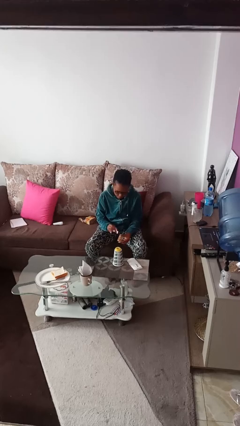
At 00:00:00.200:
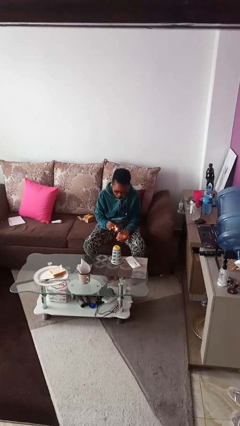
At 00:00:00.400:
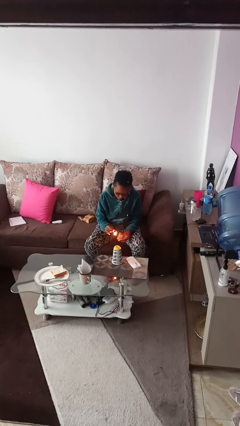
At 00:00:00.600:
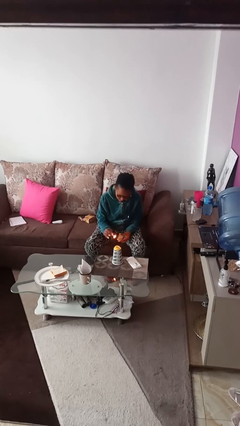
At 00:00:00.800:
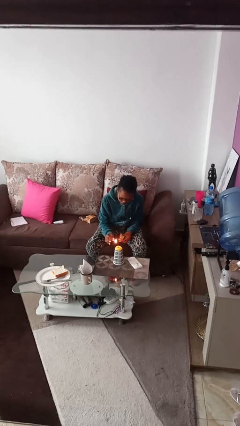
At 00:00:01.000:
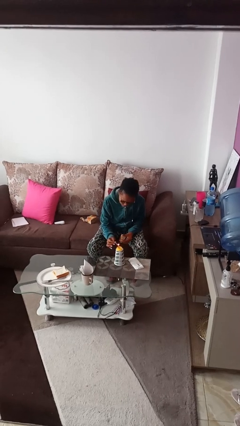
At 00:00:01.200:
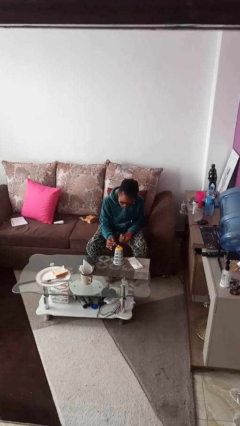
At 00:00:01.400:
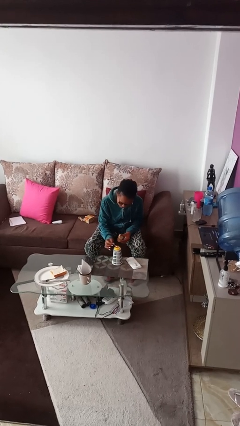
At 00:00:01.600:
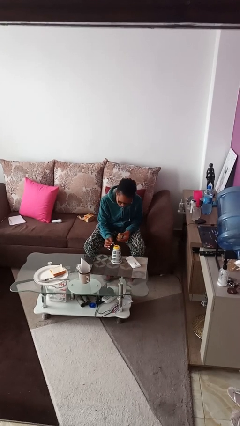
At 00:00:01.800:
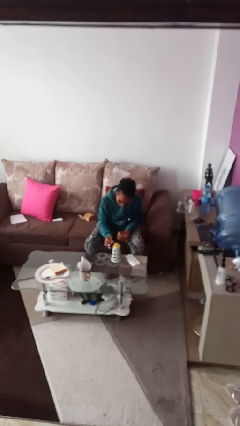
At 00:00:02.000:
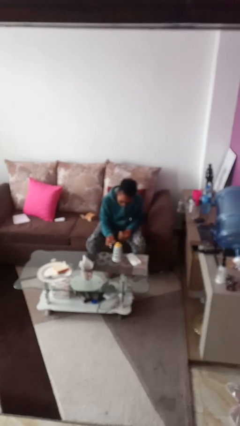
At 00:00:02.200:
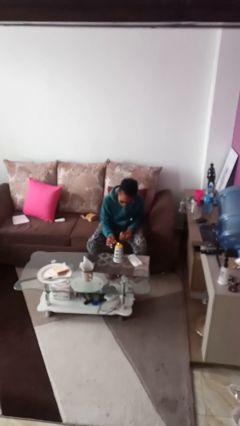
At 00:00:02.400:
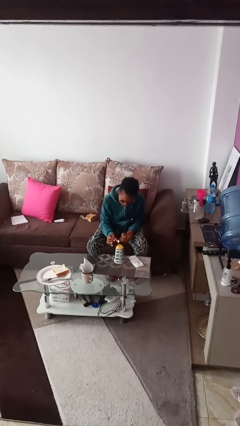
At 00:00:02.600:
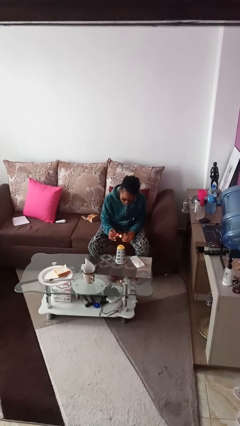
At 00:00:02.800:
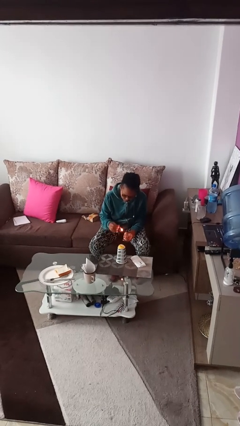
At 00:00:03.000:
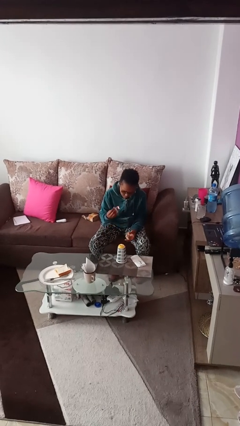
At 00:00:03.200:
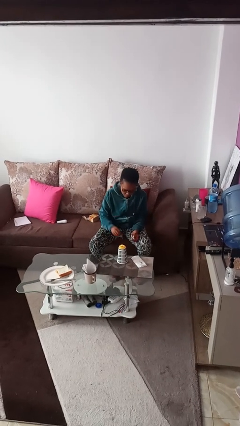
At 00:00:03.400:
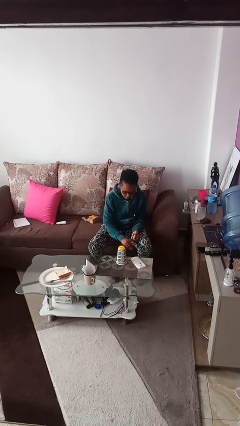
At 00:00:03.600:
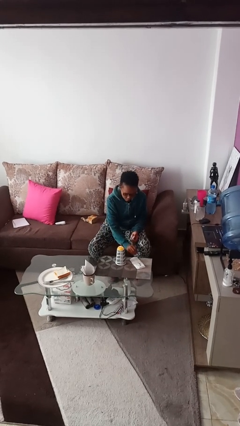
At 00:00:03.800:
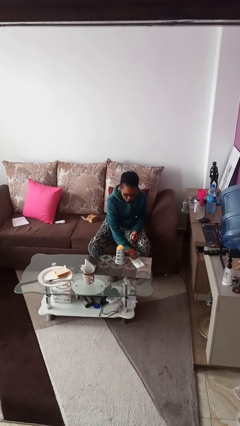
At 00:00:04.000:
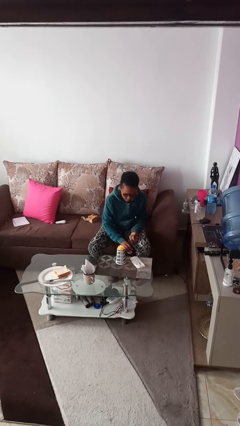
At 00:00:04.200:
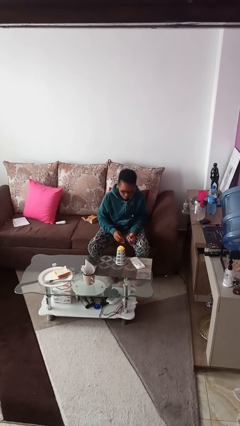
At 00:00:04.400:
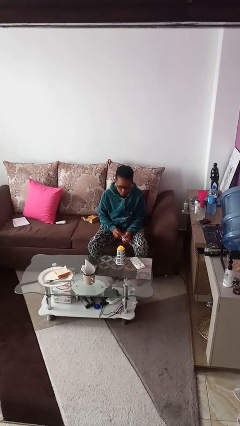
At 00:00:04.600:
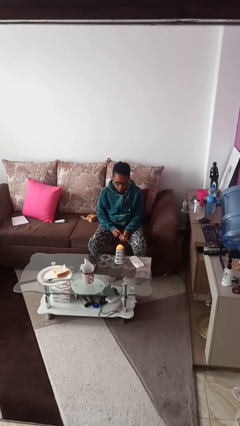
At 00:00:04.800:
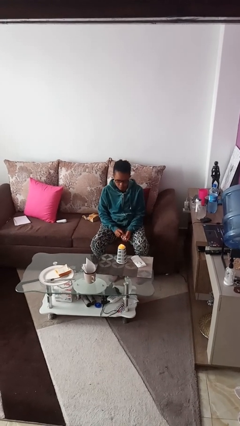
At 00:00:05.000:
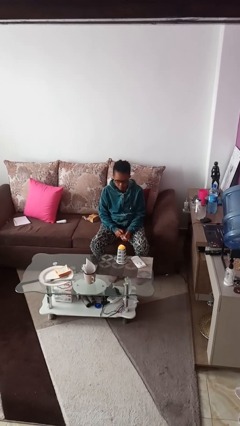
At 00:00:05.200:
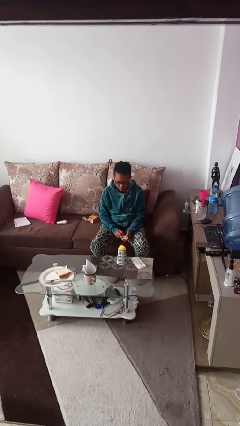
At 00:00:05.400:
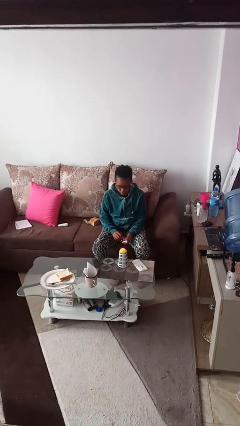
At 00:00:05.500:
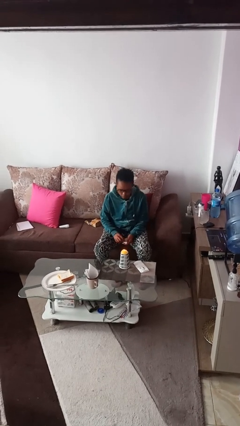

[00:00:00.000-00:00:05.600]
person lights candle

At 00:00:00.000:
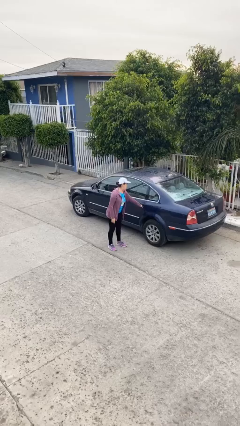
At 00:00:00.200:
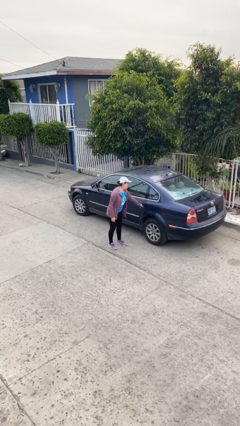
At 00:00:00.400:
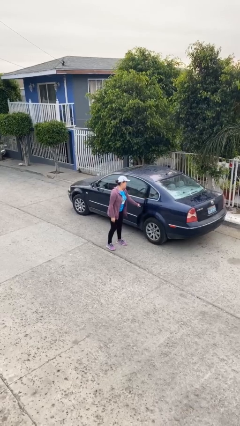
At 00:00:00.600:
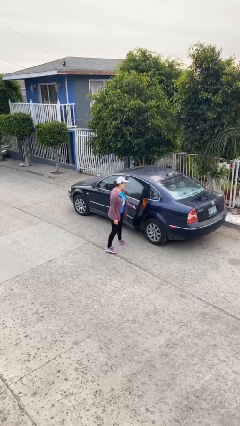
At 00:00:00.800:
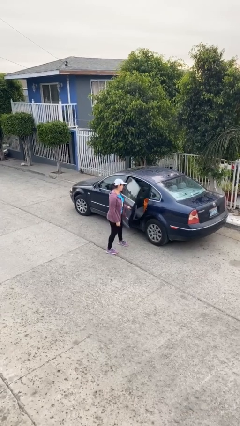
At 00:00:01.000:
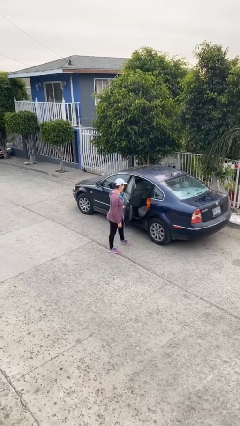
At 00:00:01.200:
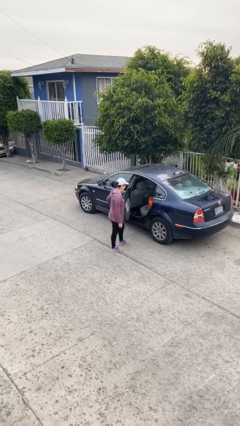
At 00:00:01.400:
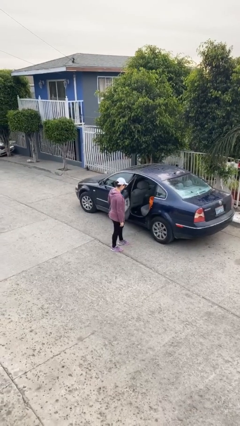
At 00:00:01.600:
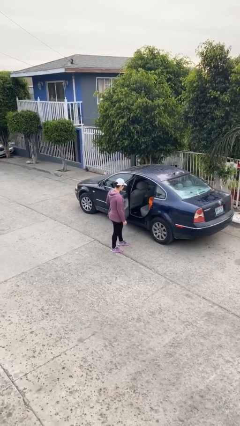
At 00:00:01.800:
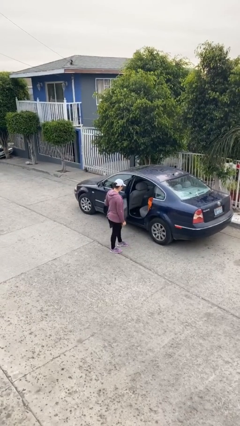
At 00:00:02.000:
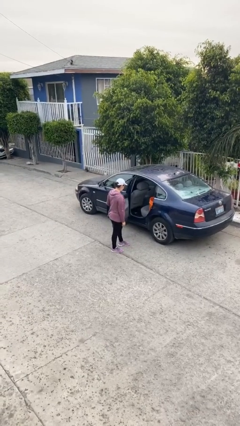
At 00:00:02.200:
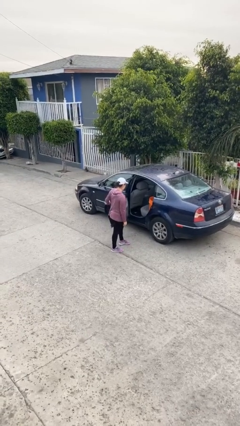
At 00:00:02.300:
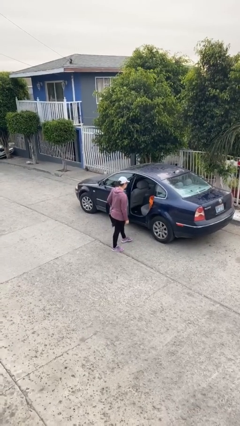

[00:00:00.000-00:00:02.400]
person opens car door

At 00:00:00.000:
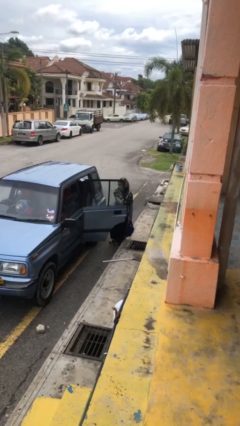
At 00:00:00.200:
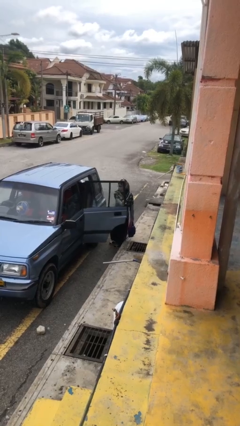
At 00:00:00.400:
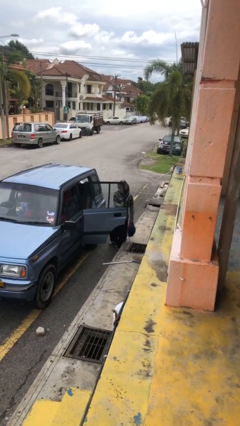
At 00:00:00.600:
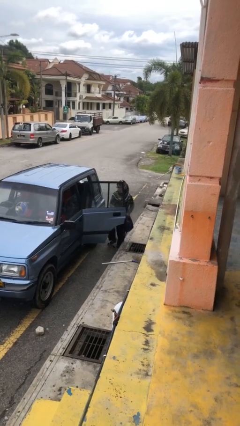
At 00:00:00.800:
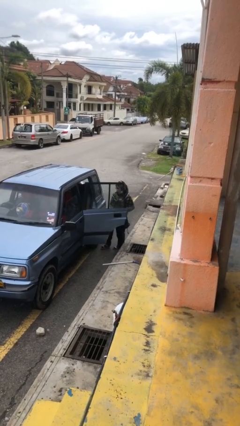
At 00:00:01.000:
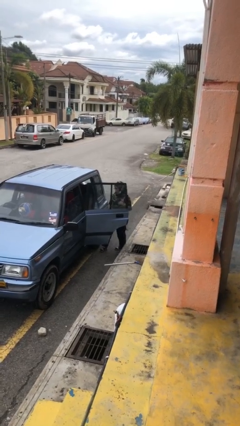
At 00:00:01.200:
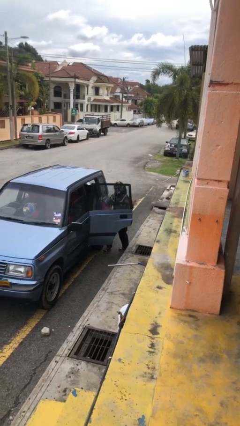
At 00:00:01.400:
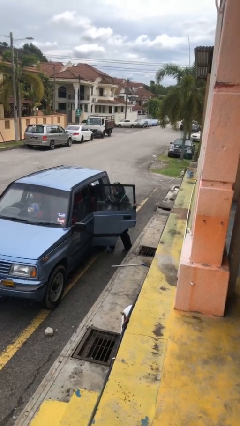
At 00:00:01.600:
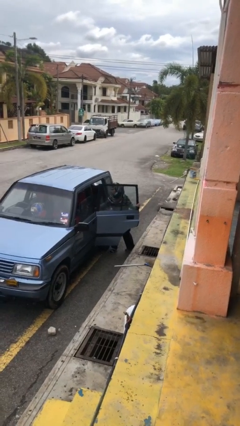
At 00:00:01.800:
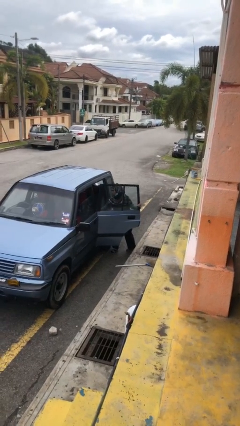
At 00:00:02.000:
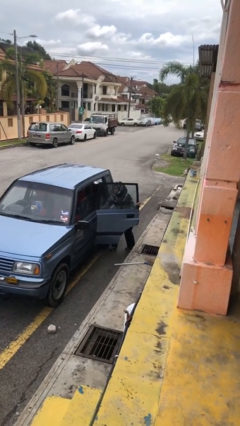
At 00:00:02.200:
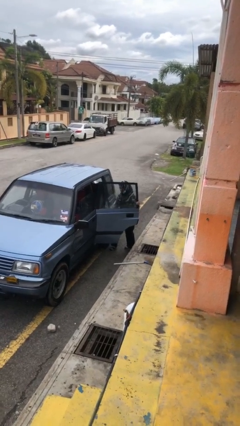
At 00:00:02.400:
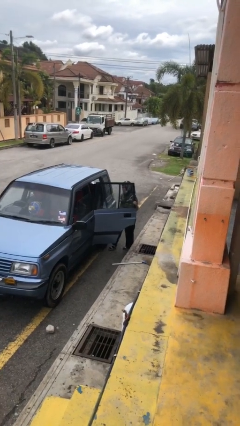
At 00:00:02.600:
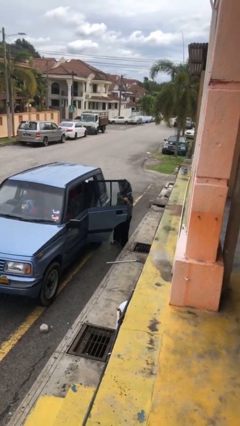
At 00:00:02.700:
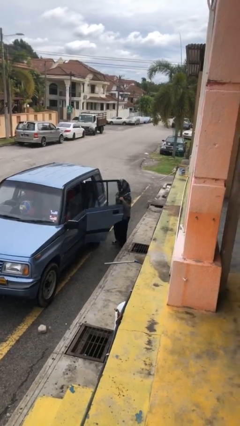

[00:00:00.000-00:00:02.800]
person loads car

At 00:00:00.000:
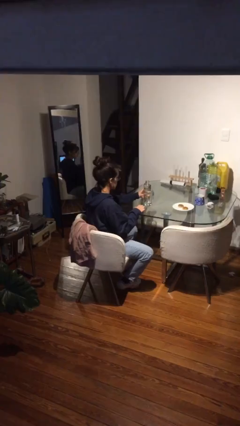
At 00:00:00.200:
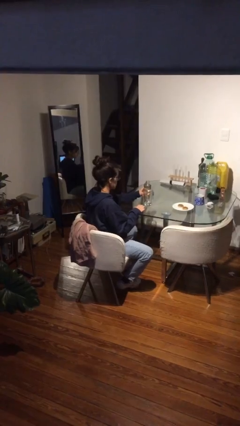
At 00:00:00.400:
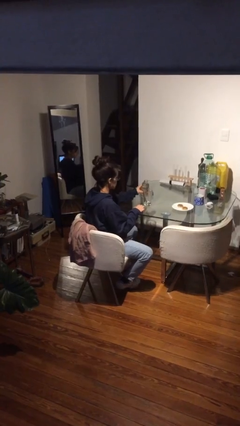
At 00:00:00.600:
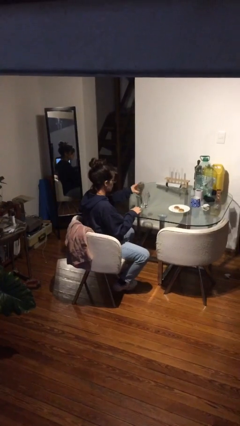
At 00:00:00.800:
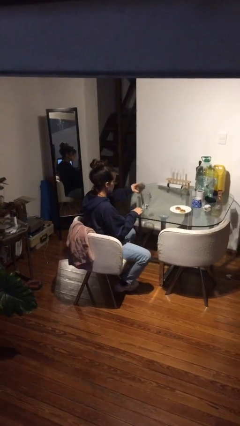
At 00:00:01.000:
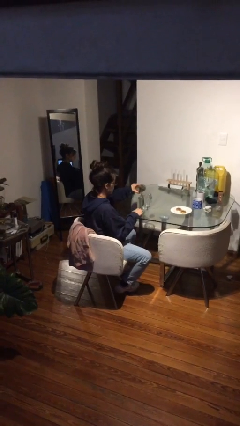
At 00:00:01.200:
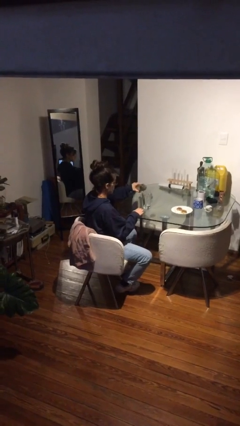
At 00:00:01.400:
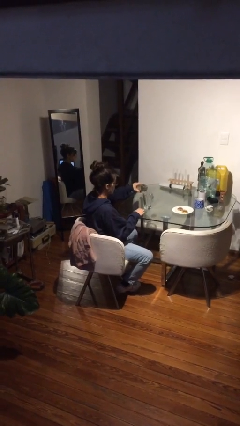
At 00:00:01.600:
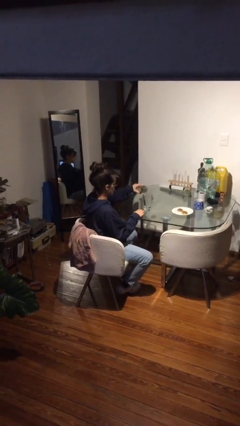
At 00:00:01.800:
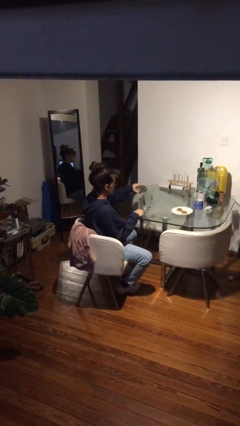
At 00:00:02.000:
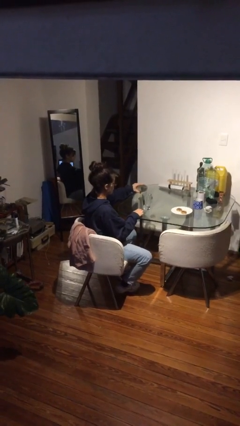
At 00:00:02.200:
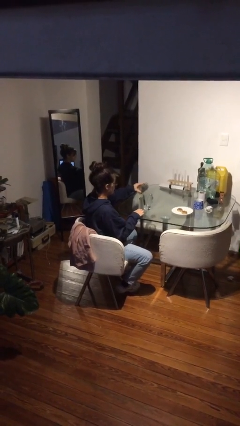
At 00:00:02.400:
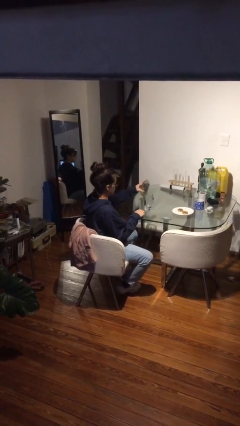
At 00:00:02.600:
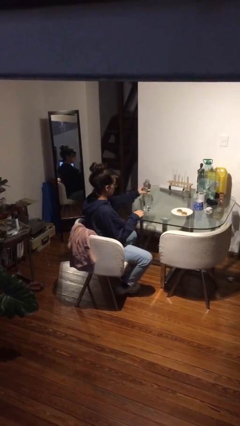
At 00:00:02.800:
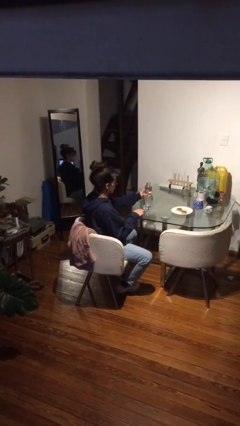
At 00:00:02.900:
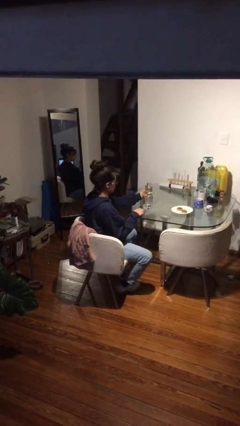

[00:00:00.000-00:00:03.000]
person pours liquid into cup

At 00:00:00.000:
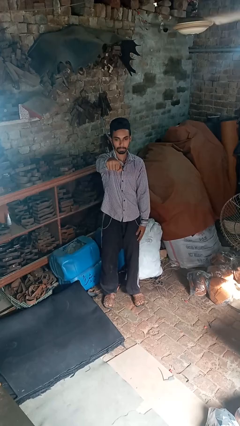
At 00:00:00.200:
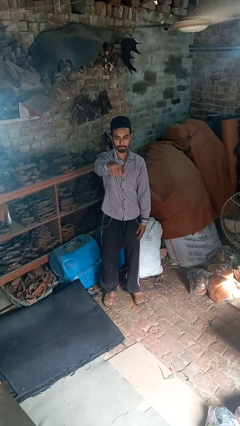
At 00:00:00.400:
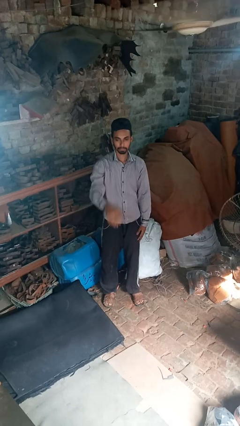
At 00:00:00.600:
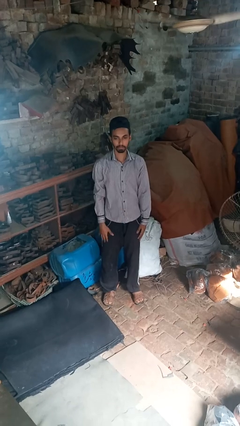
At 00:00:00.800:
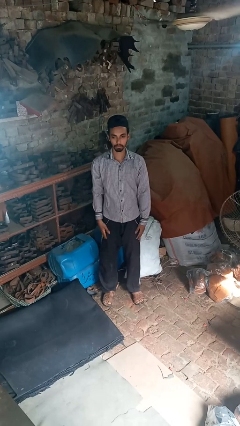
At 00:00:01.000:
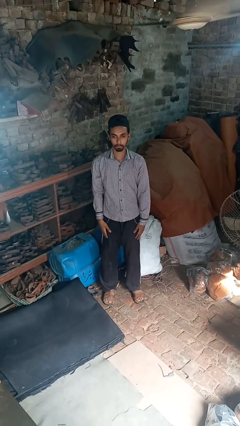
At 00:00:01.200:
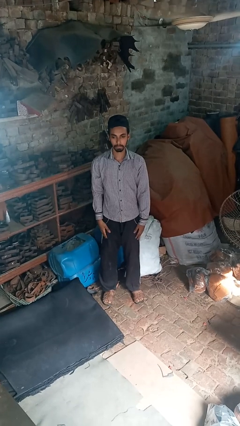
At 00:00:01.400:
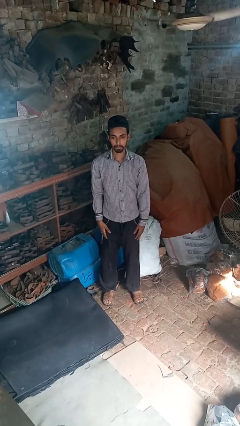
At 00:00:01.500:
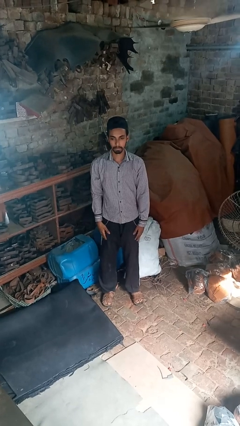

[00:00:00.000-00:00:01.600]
person punches

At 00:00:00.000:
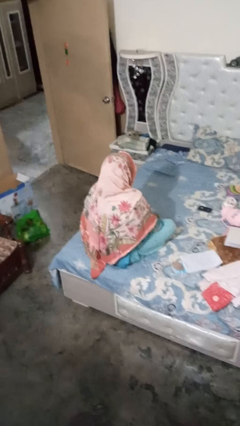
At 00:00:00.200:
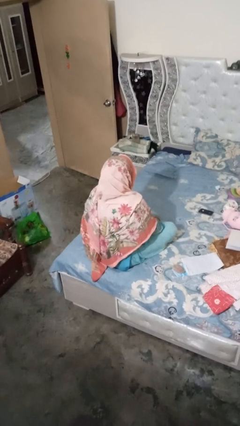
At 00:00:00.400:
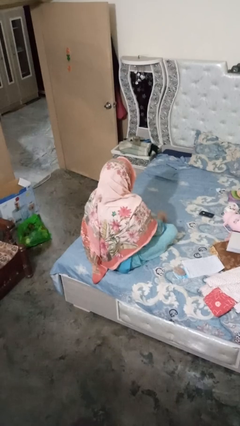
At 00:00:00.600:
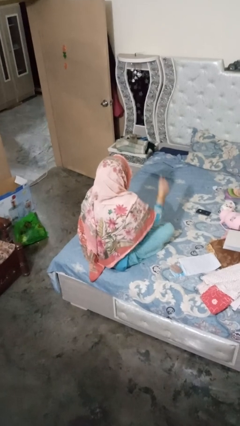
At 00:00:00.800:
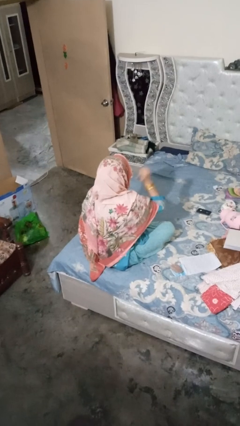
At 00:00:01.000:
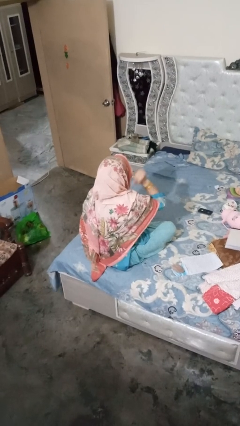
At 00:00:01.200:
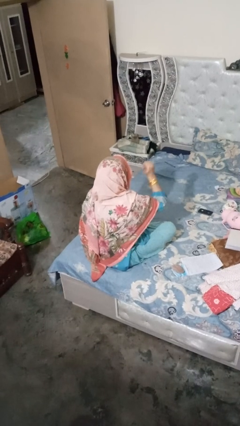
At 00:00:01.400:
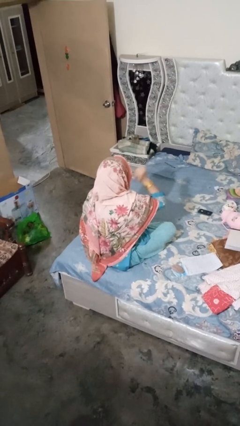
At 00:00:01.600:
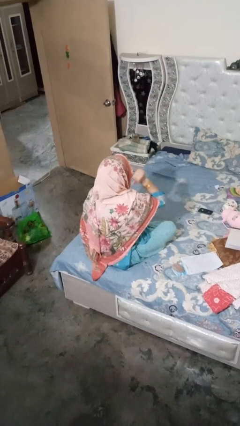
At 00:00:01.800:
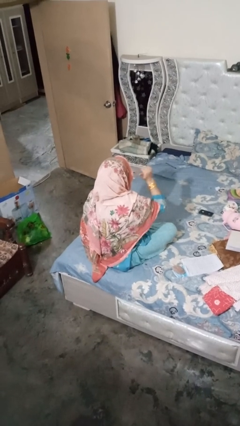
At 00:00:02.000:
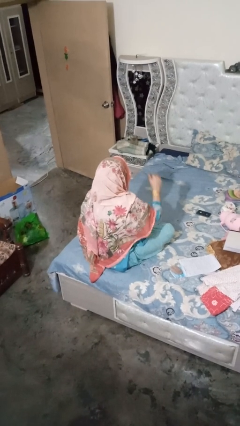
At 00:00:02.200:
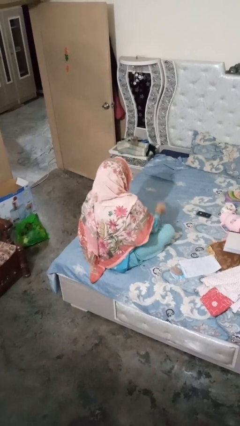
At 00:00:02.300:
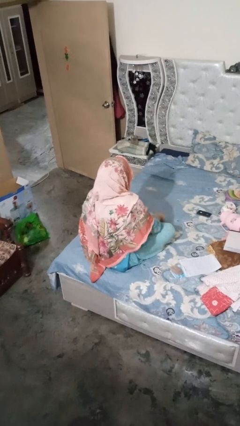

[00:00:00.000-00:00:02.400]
person gestures behind me
